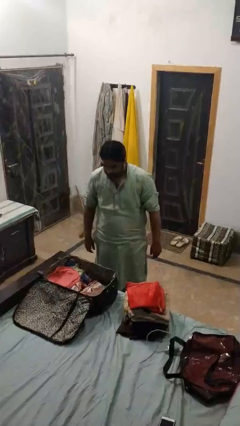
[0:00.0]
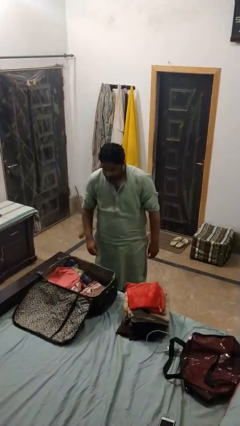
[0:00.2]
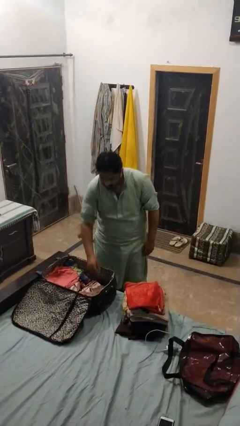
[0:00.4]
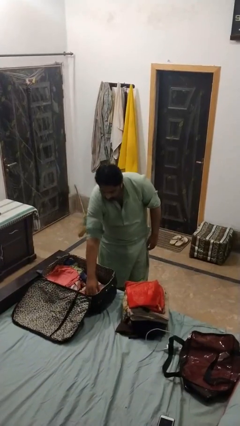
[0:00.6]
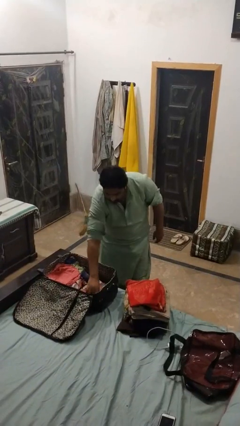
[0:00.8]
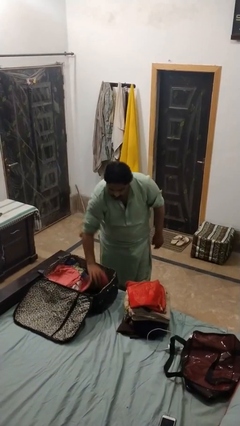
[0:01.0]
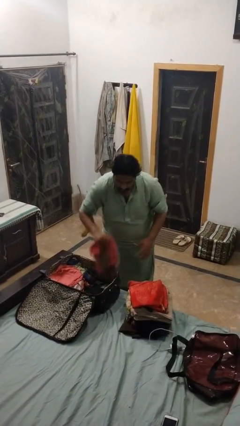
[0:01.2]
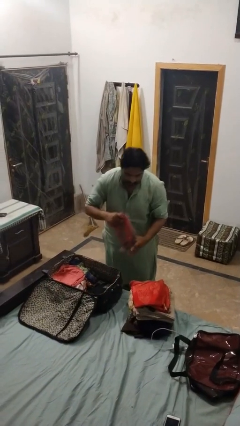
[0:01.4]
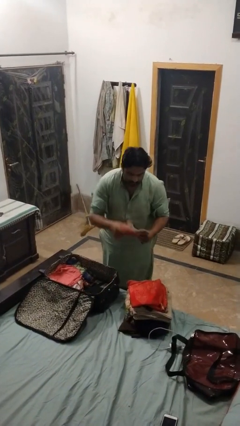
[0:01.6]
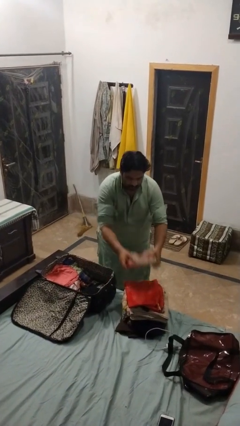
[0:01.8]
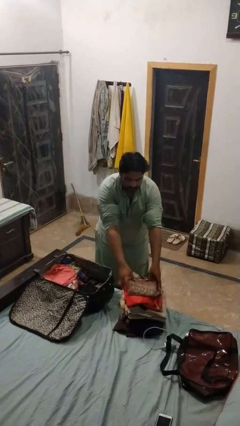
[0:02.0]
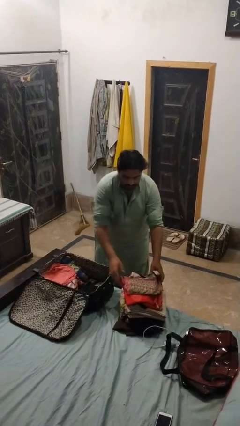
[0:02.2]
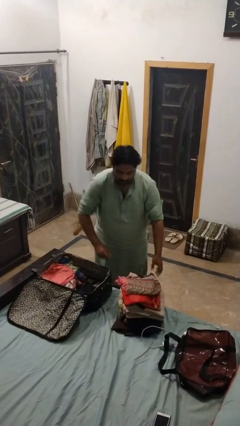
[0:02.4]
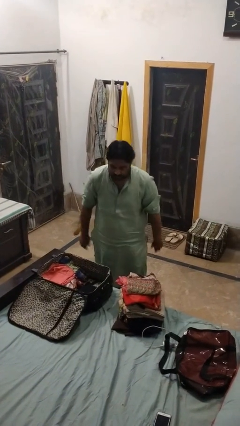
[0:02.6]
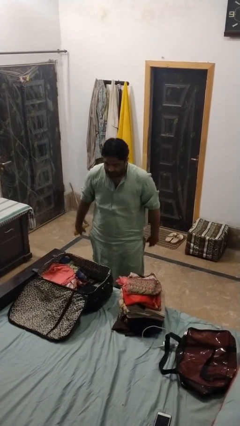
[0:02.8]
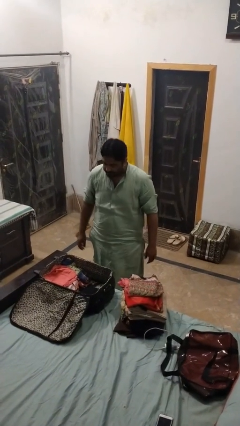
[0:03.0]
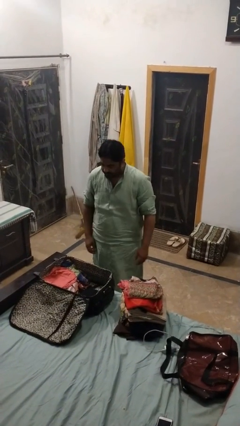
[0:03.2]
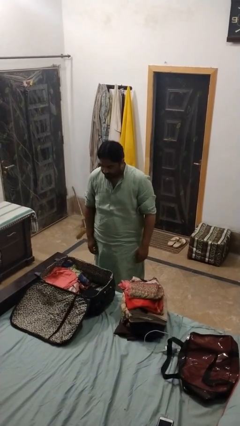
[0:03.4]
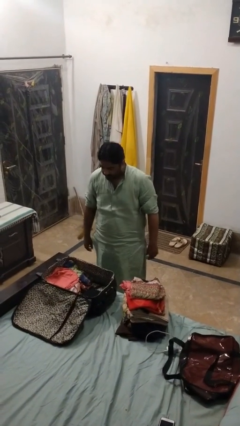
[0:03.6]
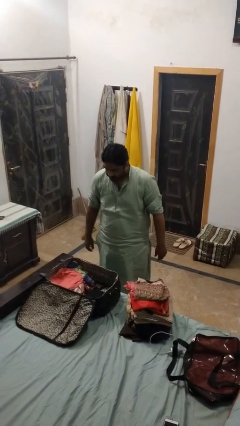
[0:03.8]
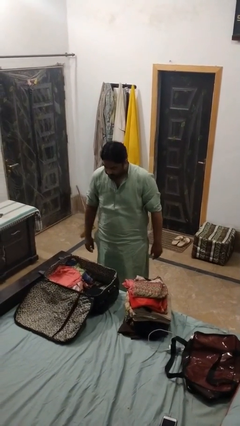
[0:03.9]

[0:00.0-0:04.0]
person unloads clothes from suitcase

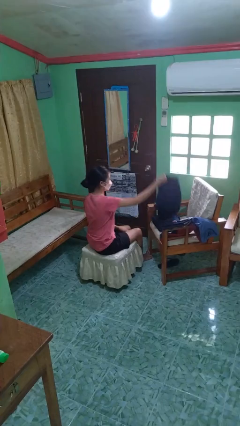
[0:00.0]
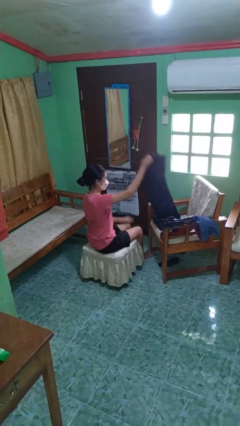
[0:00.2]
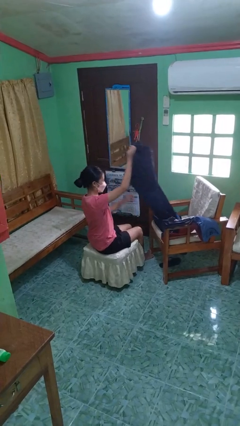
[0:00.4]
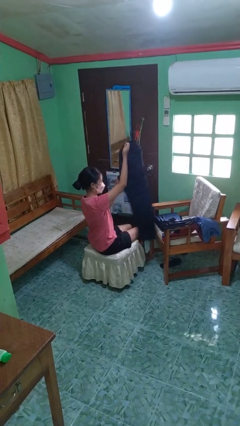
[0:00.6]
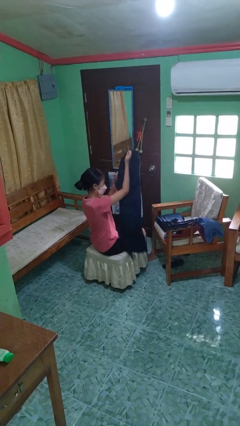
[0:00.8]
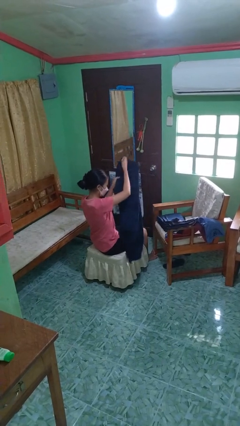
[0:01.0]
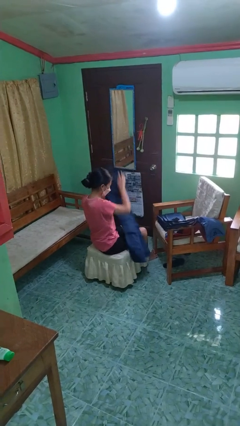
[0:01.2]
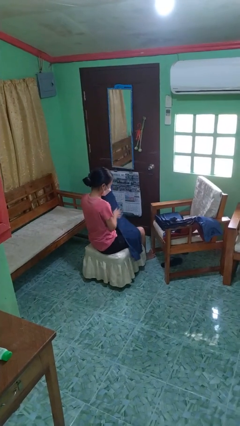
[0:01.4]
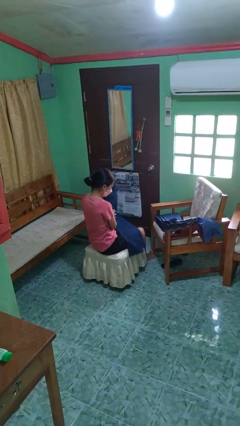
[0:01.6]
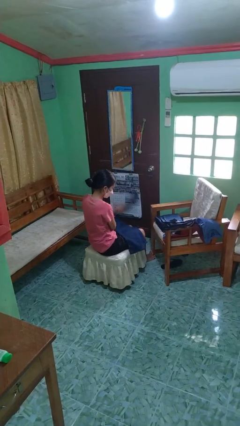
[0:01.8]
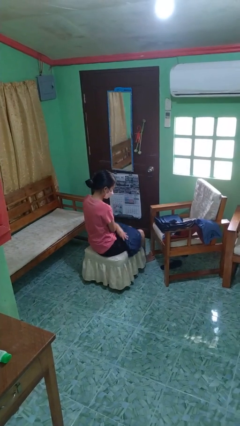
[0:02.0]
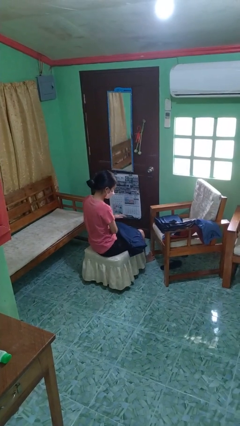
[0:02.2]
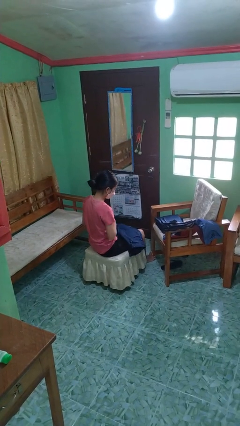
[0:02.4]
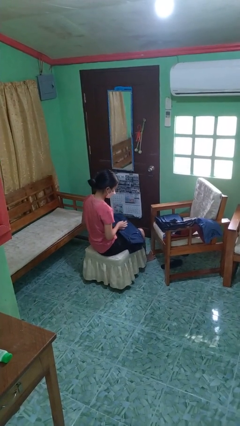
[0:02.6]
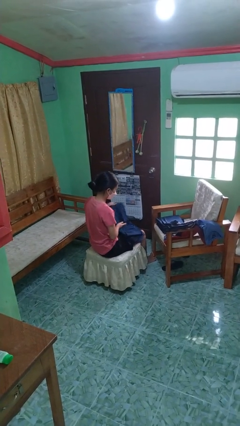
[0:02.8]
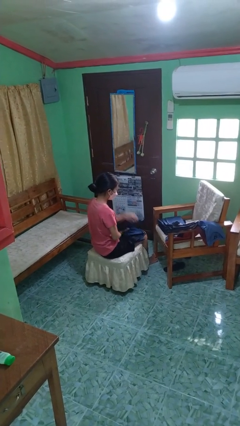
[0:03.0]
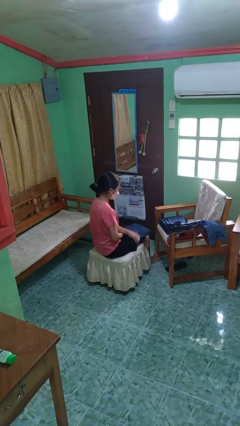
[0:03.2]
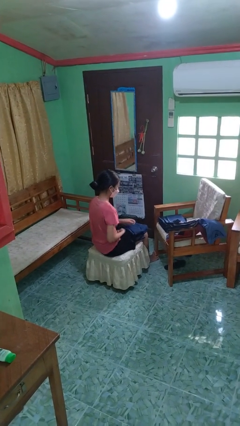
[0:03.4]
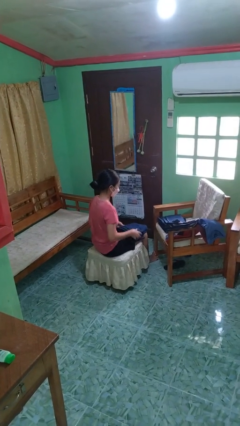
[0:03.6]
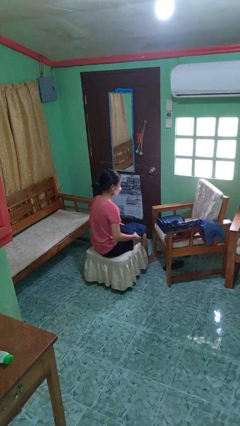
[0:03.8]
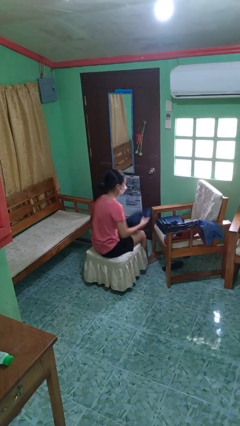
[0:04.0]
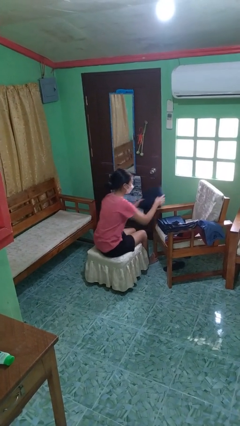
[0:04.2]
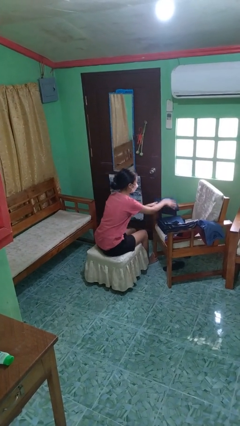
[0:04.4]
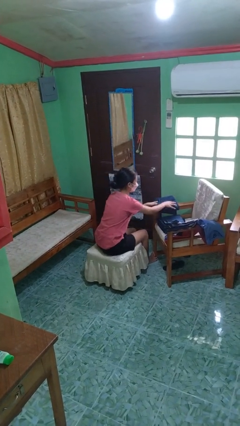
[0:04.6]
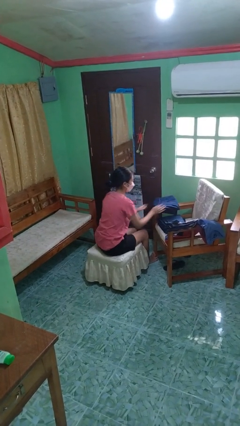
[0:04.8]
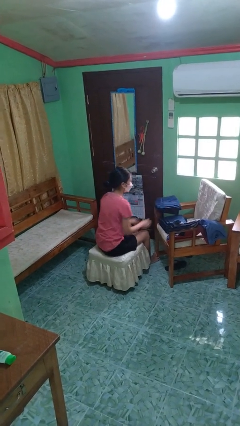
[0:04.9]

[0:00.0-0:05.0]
person folds pants

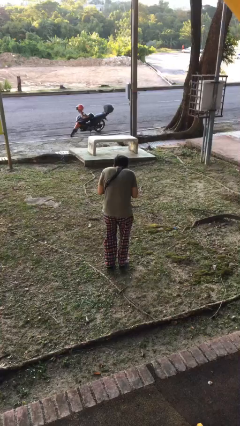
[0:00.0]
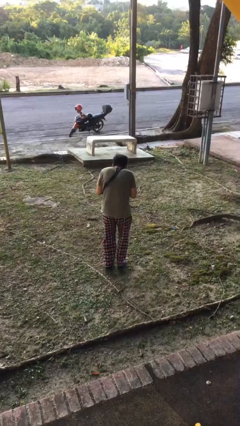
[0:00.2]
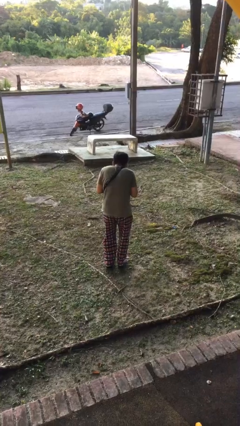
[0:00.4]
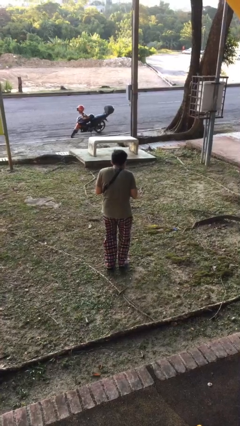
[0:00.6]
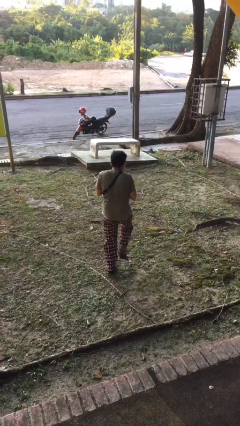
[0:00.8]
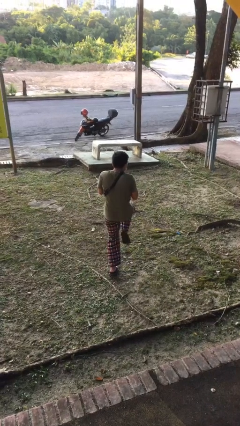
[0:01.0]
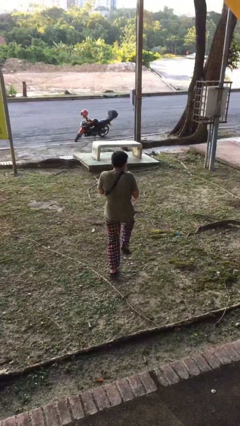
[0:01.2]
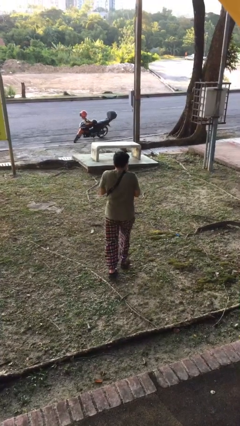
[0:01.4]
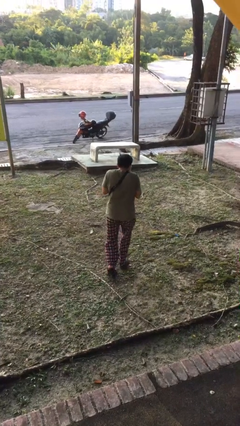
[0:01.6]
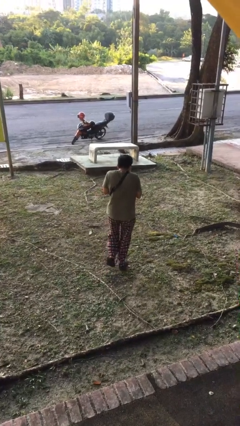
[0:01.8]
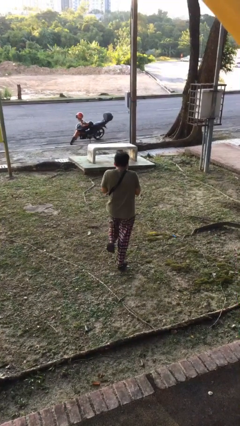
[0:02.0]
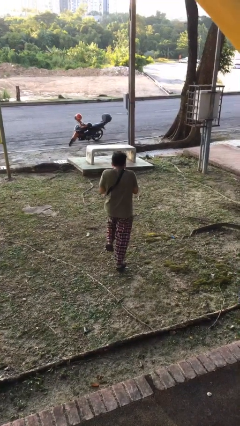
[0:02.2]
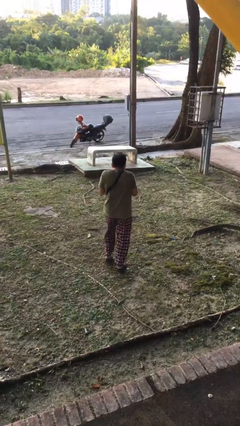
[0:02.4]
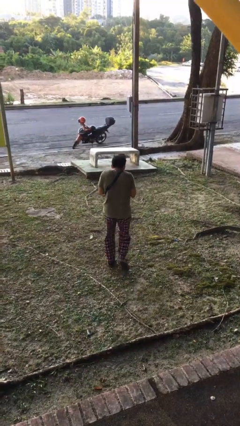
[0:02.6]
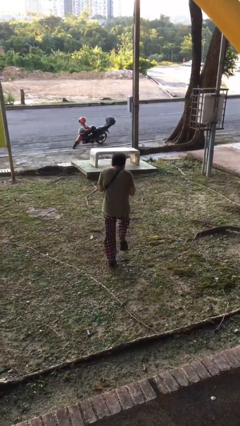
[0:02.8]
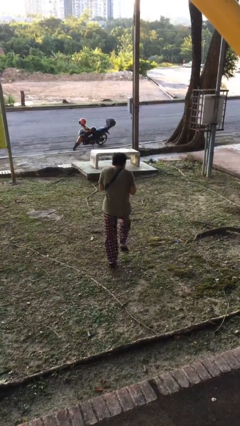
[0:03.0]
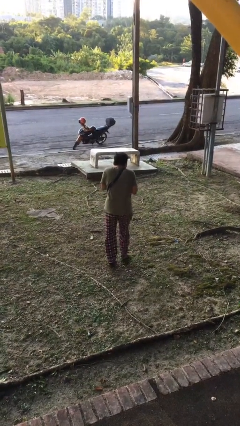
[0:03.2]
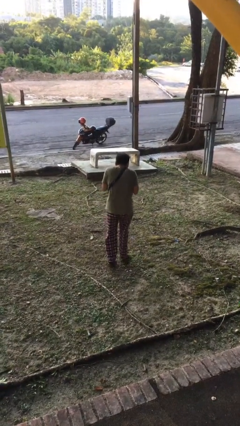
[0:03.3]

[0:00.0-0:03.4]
person walks tiptoe

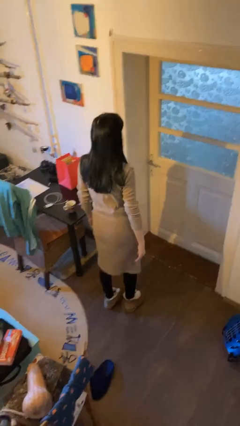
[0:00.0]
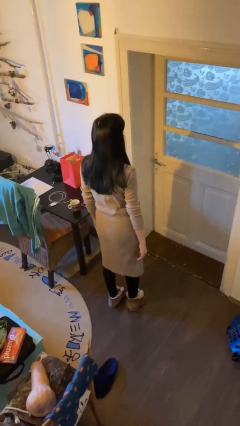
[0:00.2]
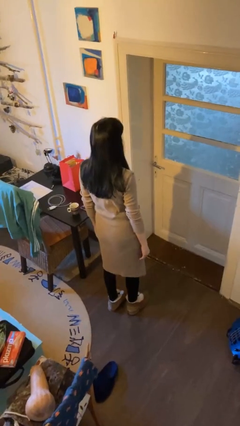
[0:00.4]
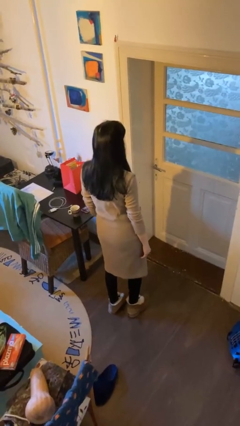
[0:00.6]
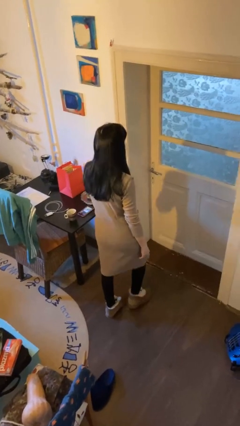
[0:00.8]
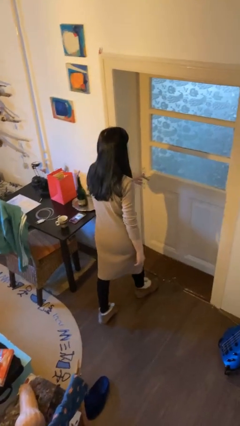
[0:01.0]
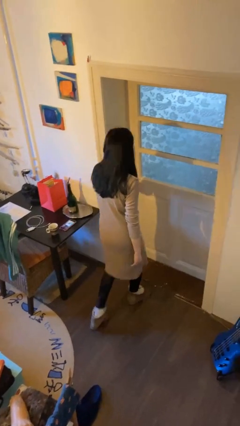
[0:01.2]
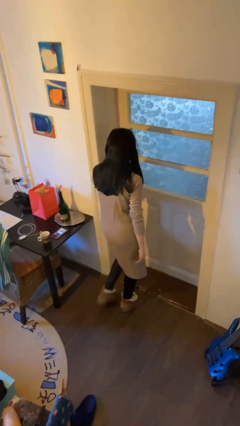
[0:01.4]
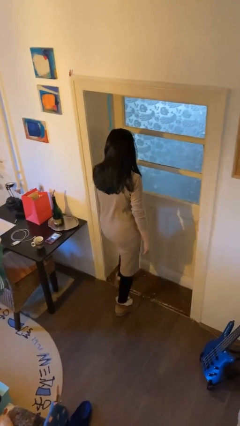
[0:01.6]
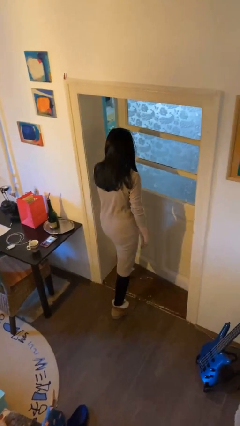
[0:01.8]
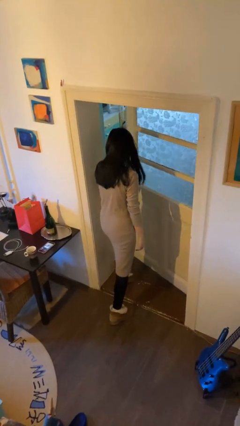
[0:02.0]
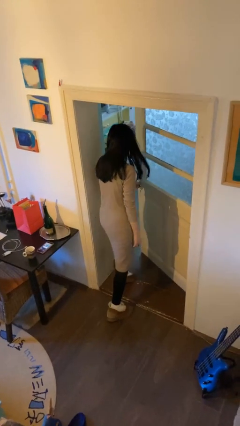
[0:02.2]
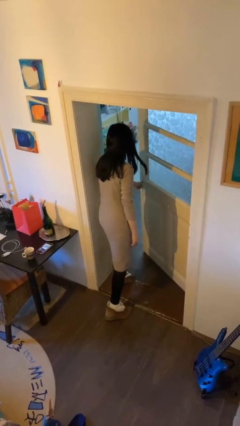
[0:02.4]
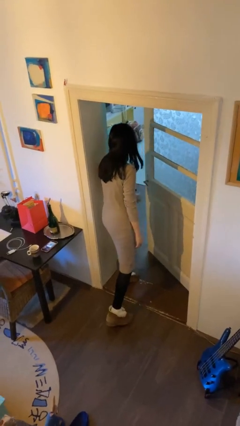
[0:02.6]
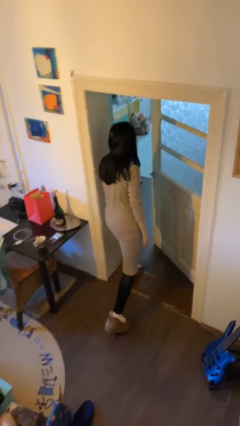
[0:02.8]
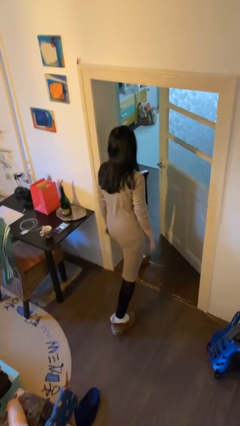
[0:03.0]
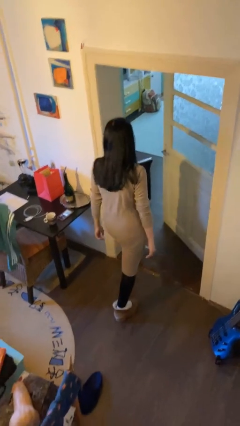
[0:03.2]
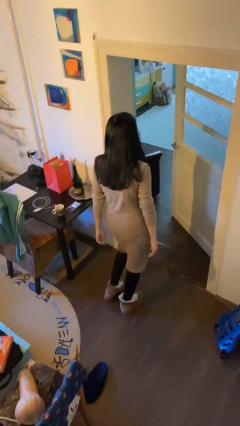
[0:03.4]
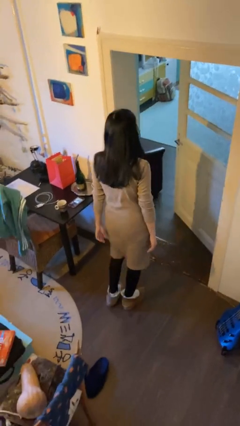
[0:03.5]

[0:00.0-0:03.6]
person opens facility door

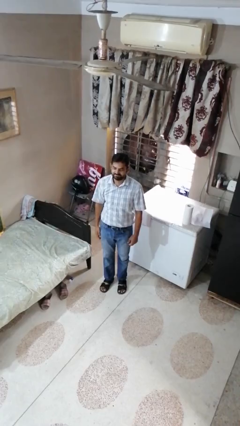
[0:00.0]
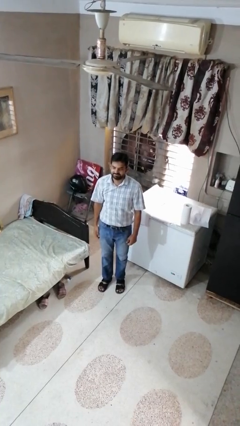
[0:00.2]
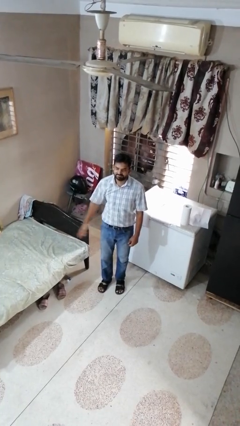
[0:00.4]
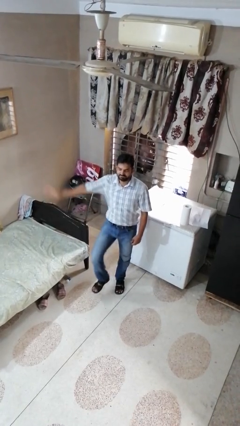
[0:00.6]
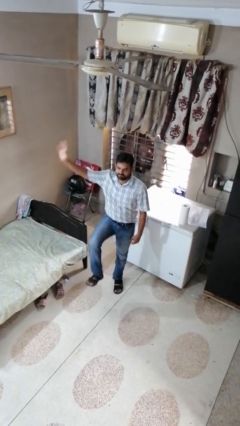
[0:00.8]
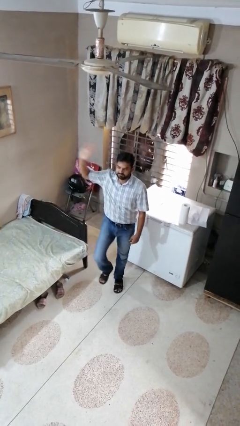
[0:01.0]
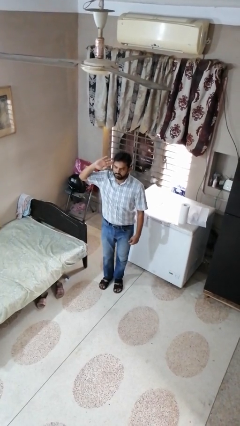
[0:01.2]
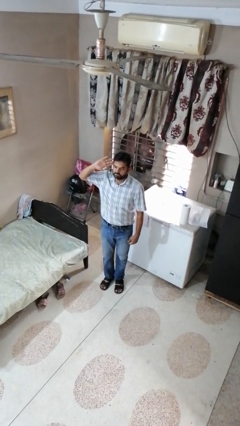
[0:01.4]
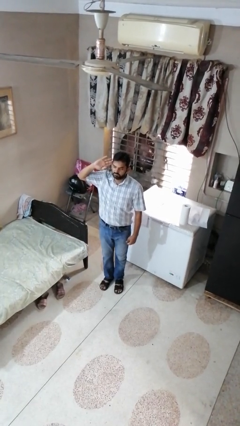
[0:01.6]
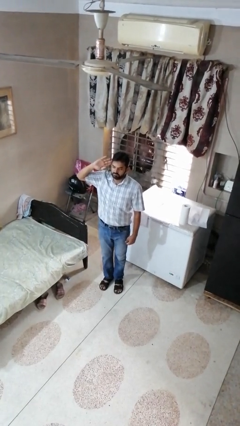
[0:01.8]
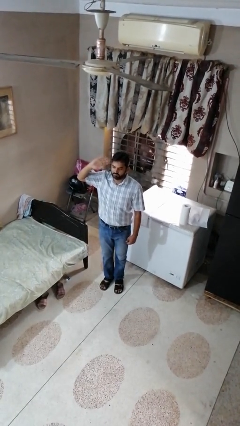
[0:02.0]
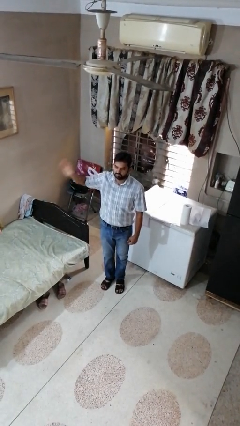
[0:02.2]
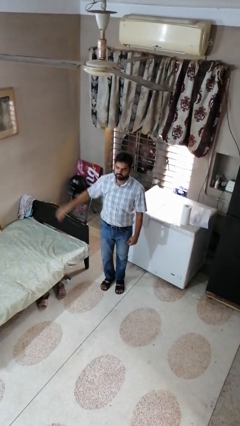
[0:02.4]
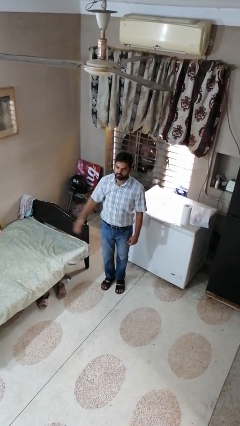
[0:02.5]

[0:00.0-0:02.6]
person salutes
